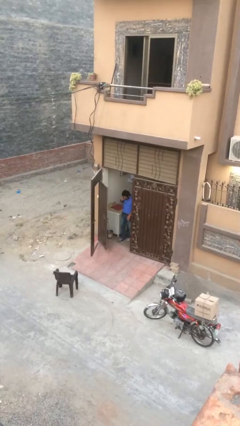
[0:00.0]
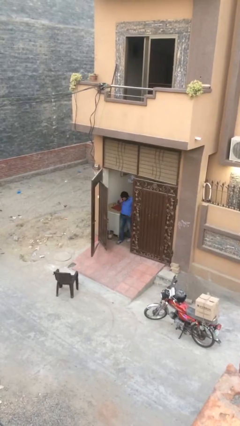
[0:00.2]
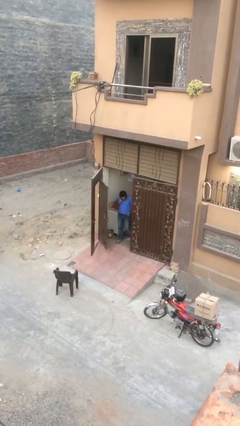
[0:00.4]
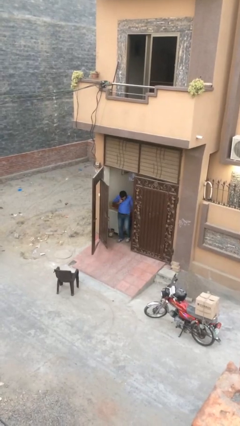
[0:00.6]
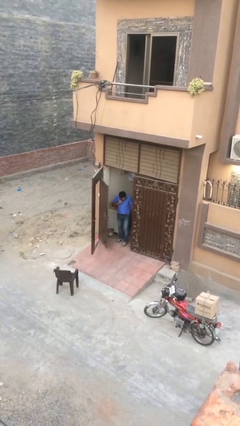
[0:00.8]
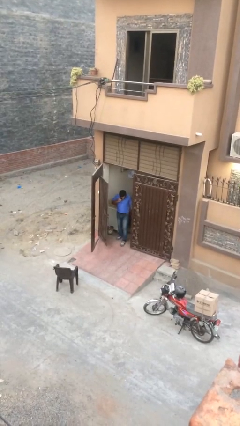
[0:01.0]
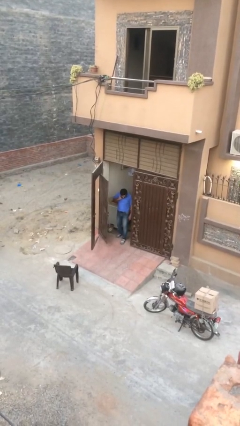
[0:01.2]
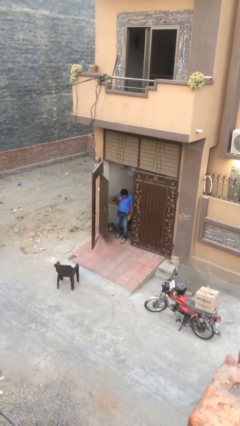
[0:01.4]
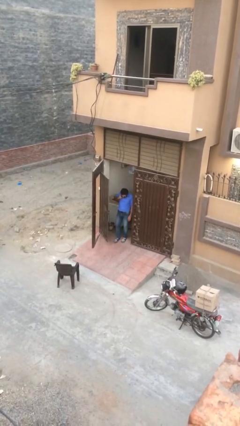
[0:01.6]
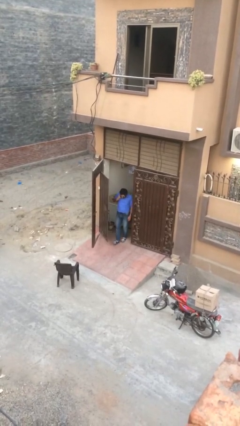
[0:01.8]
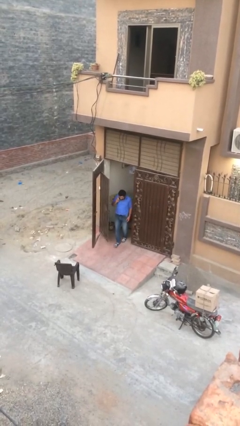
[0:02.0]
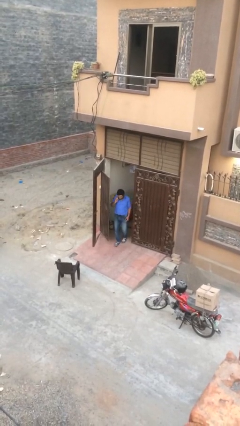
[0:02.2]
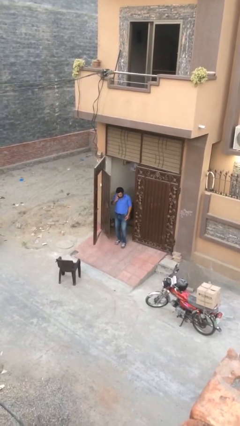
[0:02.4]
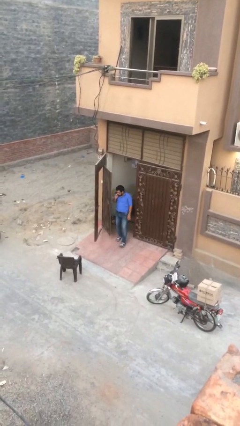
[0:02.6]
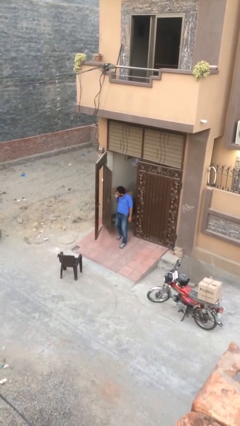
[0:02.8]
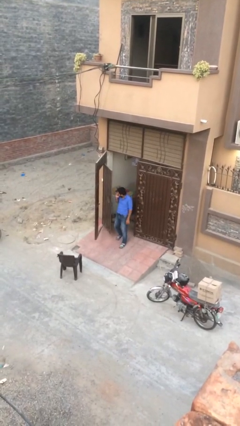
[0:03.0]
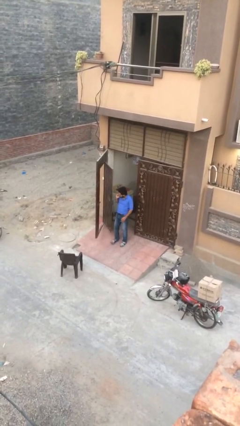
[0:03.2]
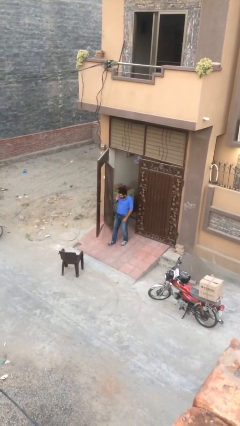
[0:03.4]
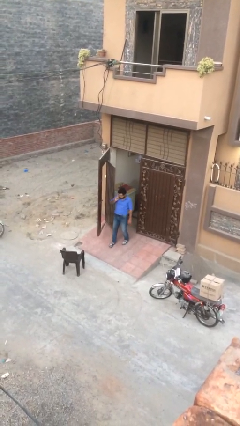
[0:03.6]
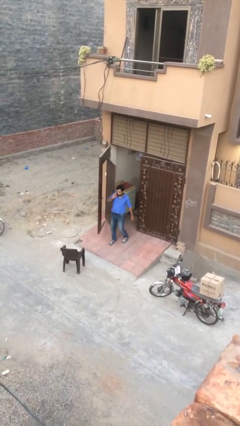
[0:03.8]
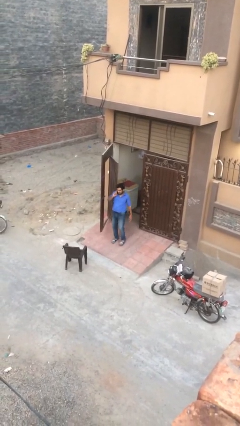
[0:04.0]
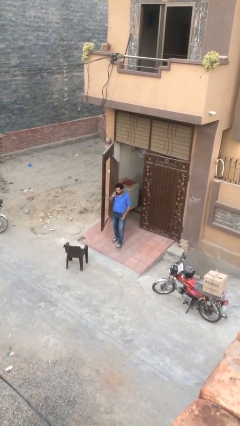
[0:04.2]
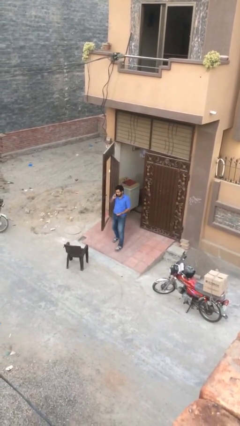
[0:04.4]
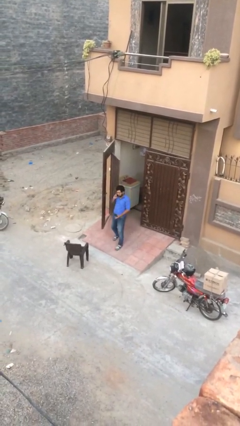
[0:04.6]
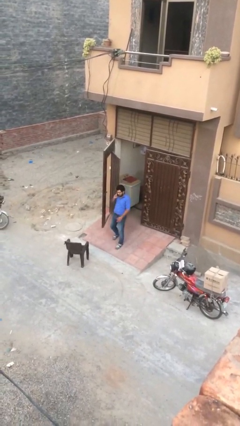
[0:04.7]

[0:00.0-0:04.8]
person enters scene through structure

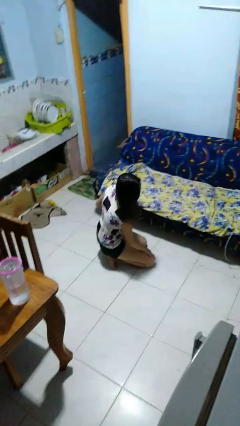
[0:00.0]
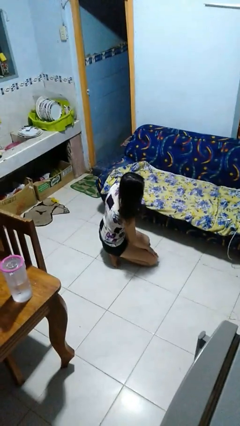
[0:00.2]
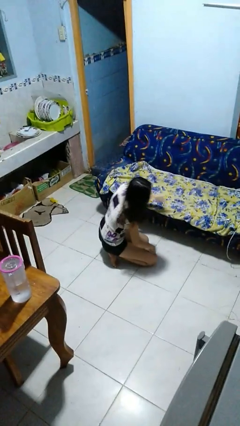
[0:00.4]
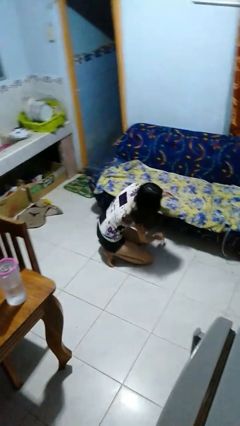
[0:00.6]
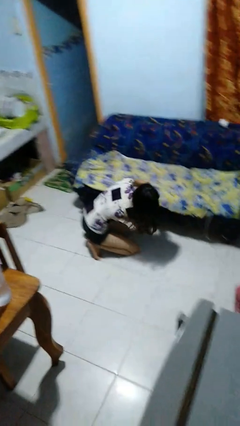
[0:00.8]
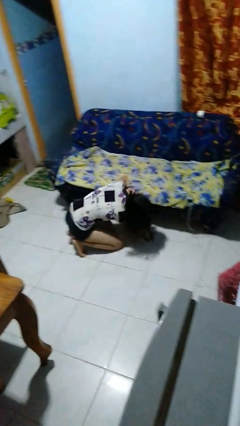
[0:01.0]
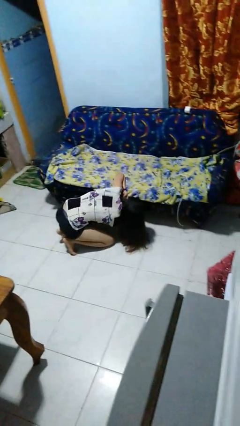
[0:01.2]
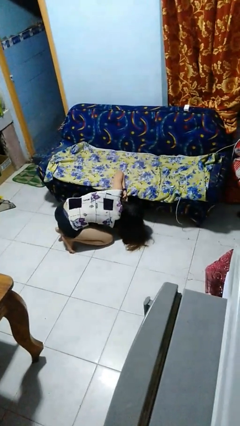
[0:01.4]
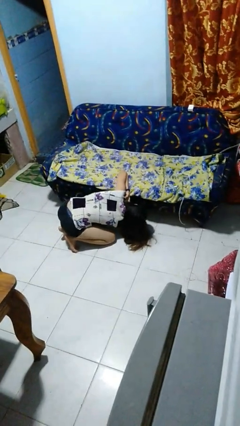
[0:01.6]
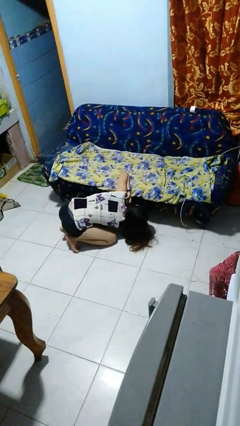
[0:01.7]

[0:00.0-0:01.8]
person searches under couch

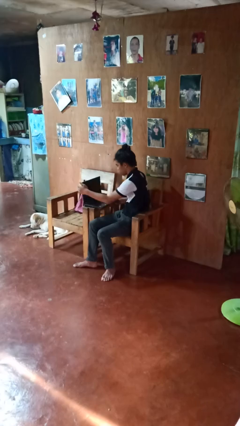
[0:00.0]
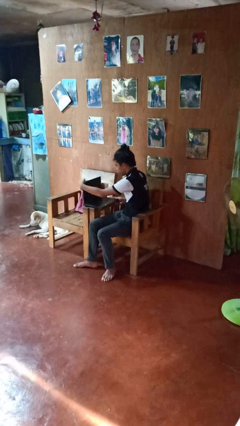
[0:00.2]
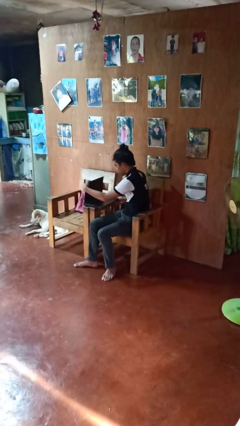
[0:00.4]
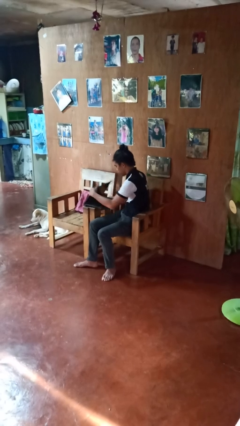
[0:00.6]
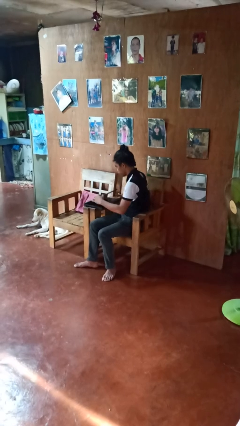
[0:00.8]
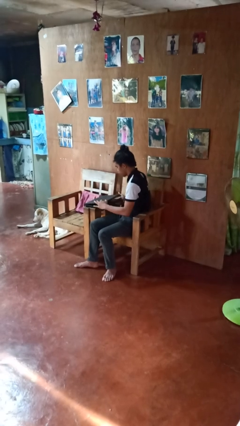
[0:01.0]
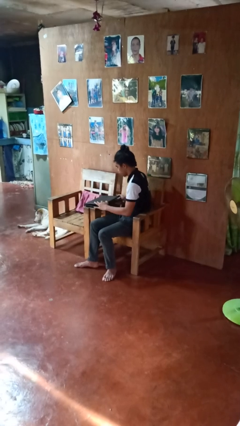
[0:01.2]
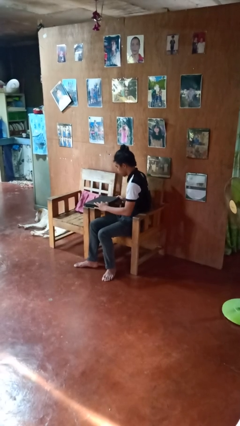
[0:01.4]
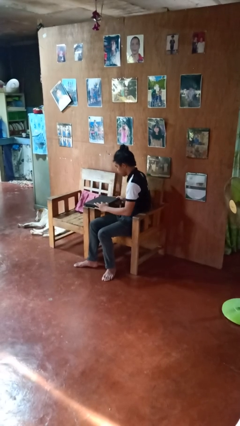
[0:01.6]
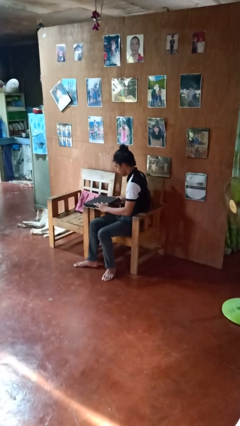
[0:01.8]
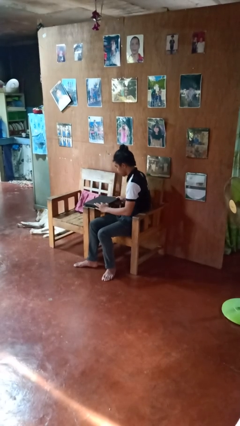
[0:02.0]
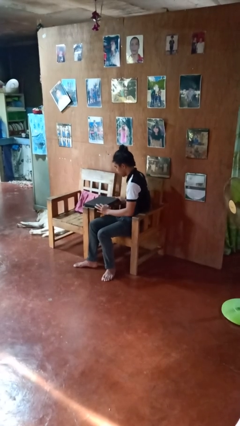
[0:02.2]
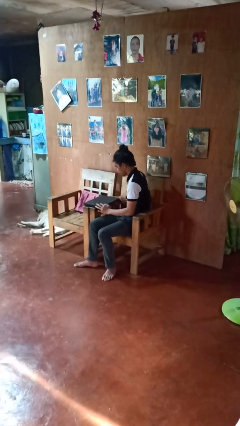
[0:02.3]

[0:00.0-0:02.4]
person closes laptop

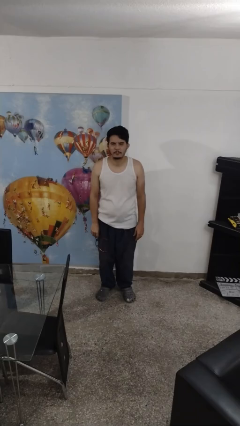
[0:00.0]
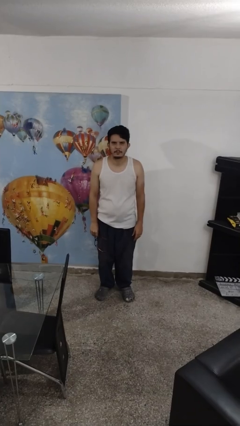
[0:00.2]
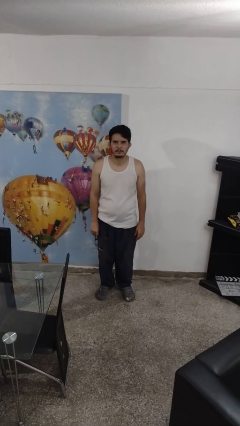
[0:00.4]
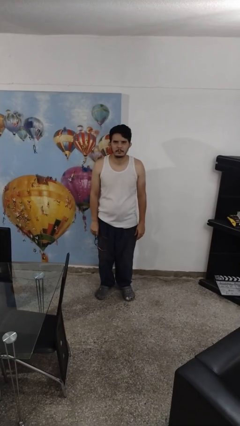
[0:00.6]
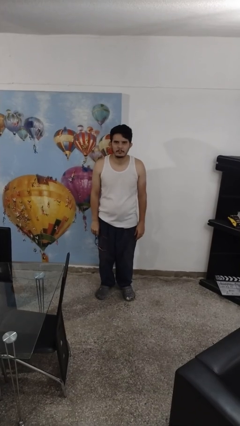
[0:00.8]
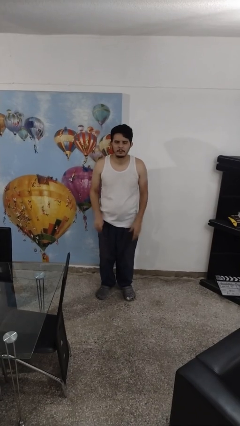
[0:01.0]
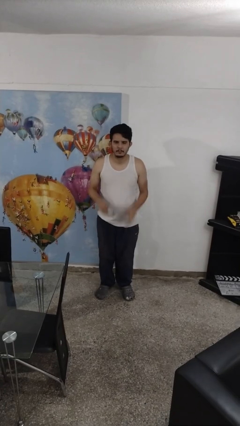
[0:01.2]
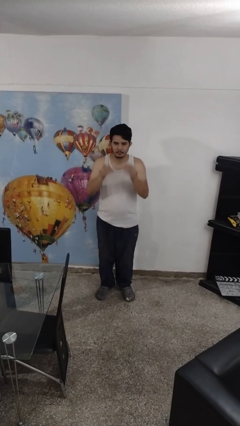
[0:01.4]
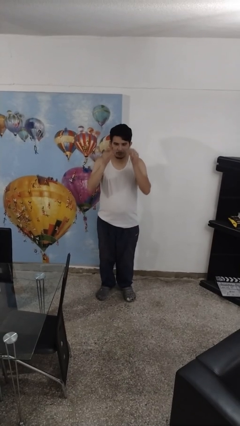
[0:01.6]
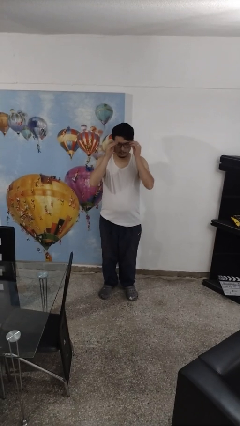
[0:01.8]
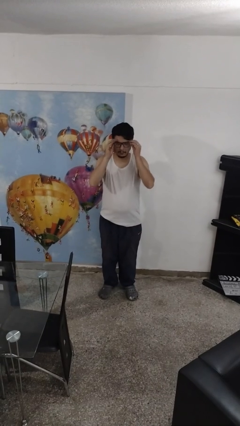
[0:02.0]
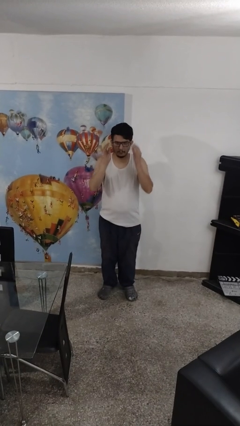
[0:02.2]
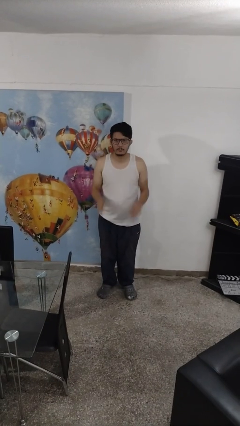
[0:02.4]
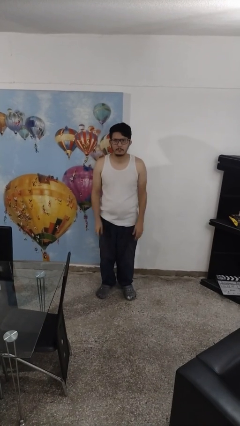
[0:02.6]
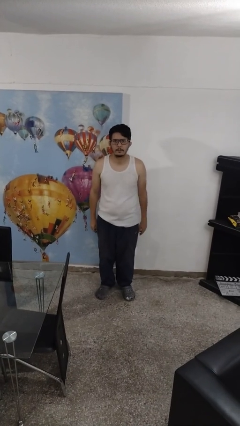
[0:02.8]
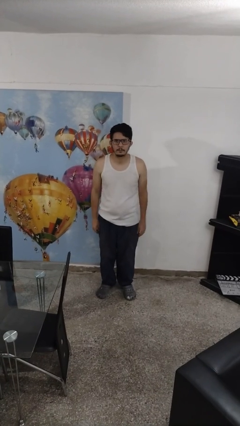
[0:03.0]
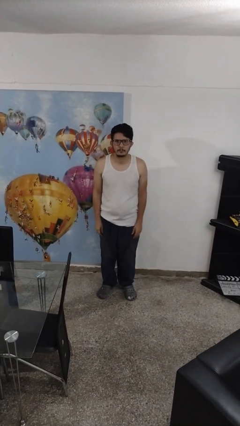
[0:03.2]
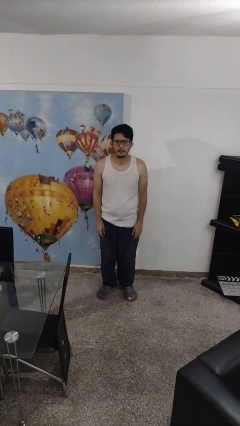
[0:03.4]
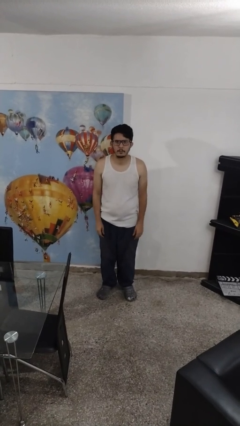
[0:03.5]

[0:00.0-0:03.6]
person puts on glasses

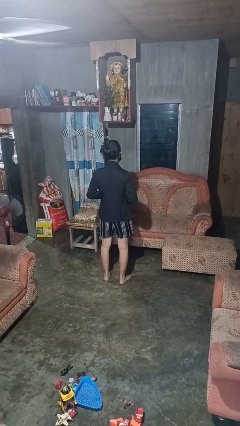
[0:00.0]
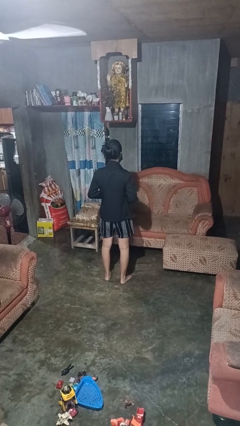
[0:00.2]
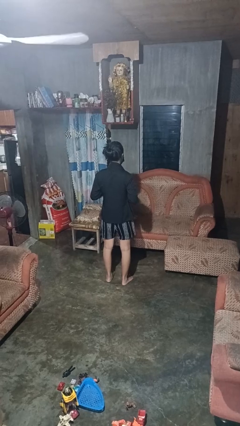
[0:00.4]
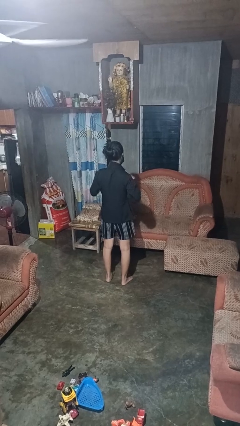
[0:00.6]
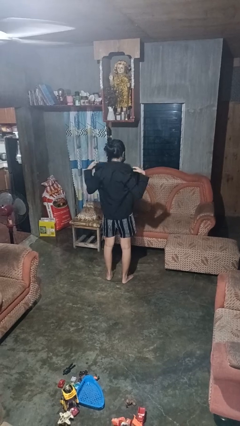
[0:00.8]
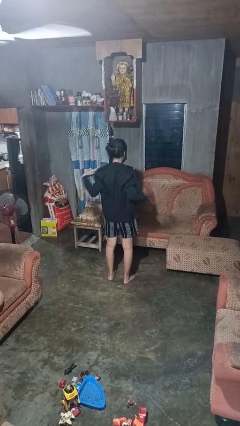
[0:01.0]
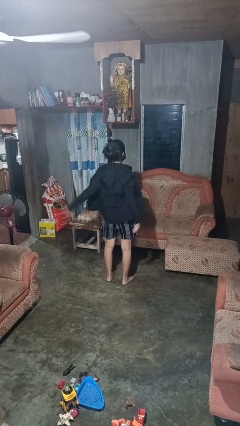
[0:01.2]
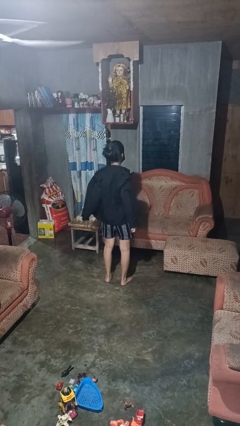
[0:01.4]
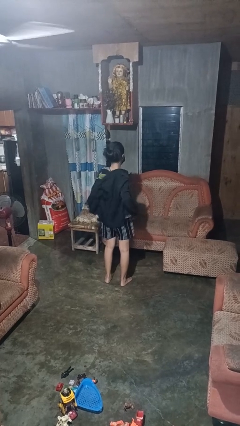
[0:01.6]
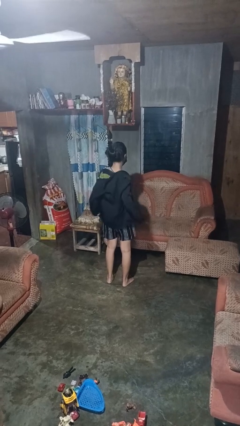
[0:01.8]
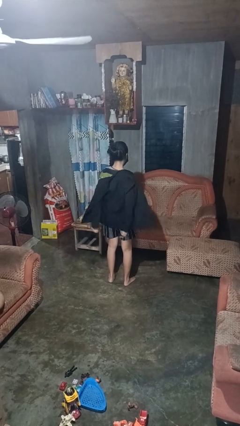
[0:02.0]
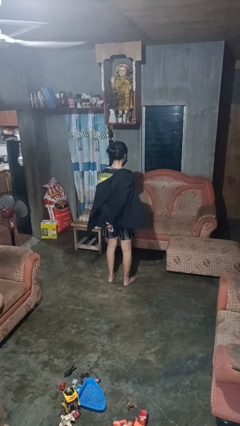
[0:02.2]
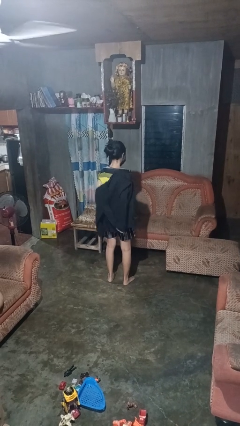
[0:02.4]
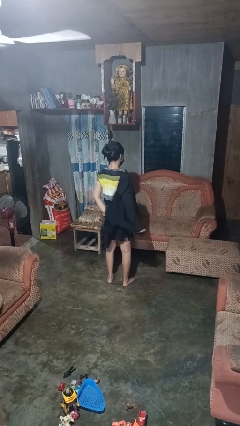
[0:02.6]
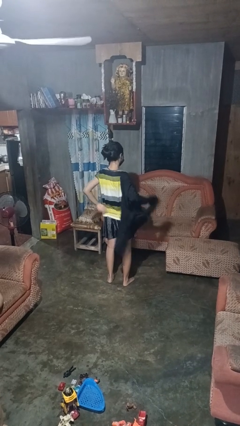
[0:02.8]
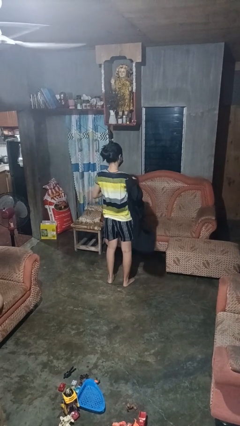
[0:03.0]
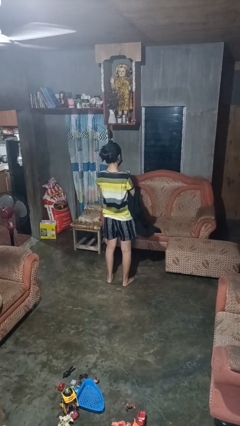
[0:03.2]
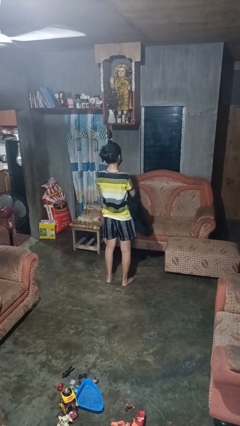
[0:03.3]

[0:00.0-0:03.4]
person takes off shirt

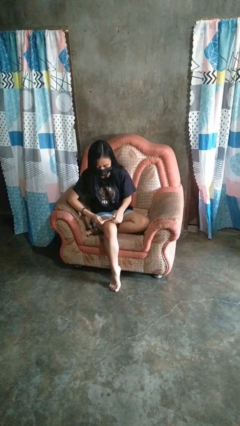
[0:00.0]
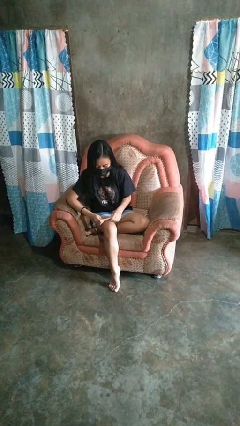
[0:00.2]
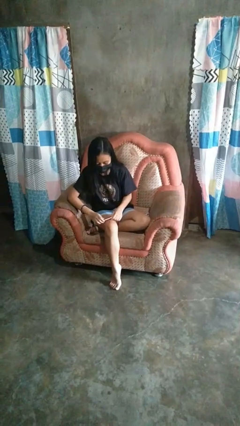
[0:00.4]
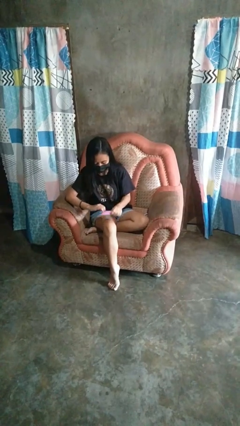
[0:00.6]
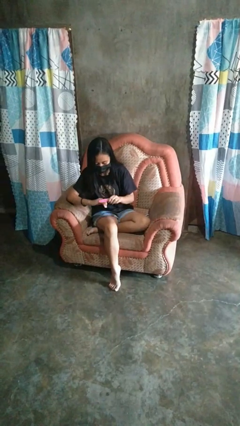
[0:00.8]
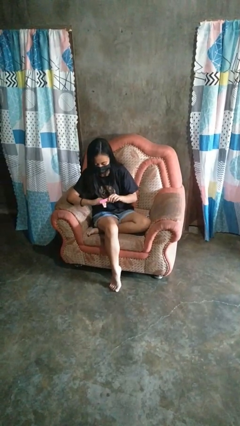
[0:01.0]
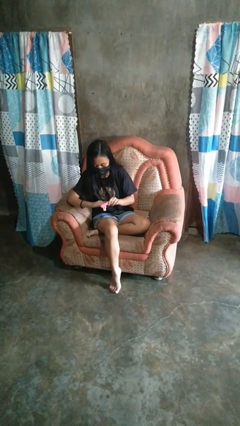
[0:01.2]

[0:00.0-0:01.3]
person files fingernails
